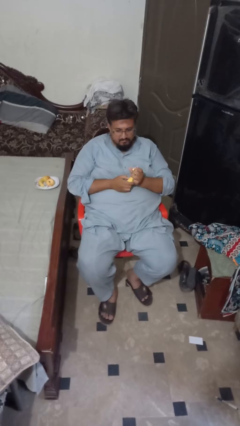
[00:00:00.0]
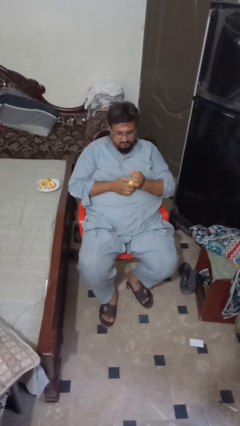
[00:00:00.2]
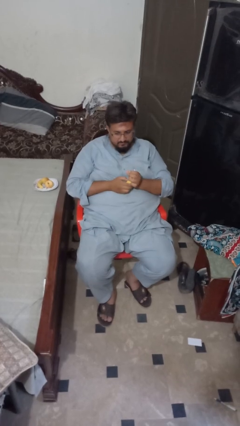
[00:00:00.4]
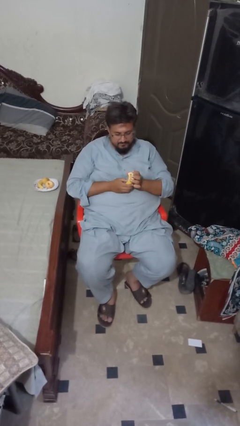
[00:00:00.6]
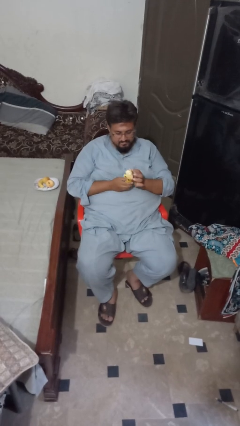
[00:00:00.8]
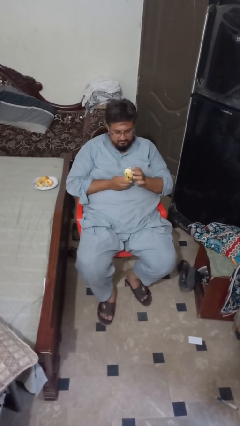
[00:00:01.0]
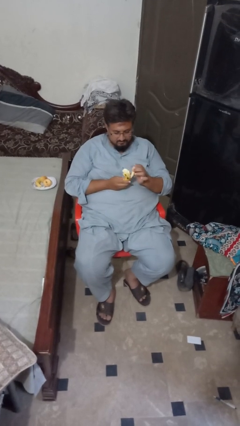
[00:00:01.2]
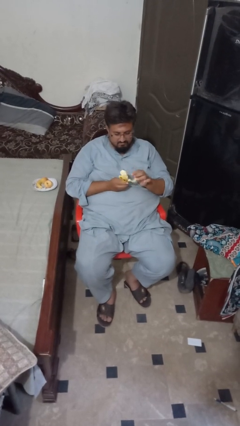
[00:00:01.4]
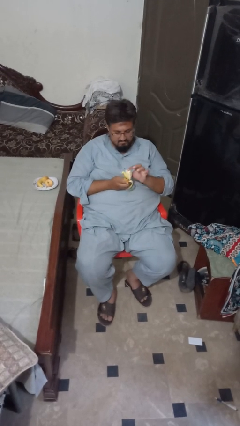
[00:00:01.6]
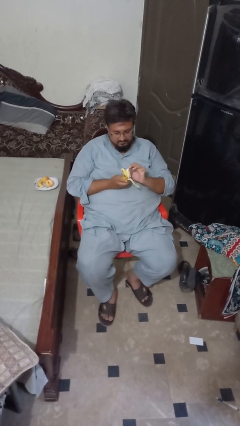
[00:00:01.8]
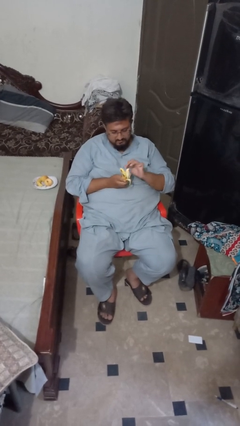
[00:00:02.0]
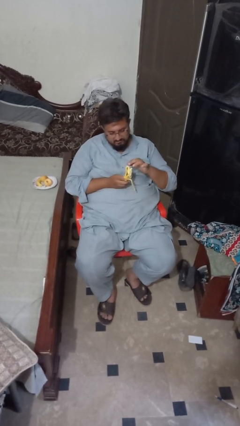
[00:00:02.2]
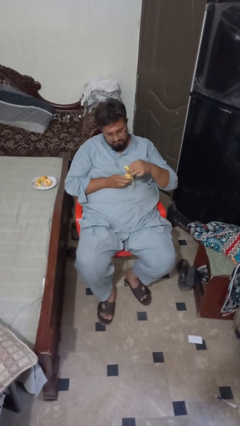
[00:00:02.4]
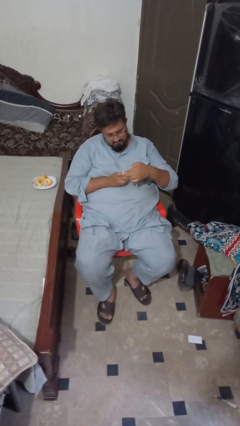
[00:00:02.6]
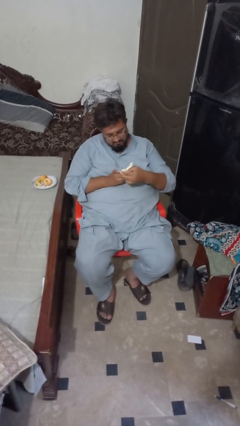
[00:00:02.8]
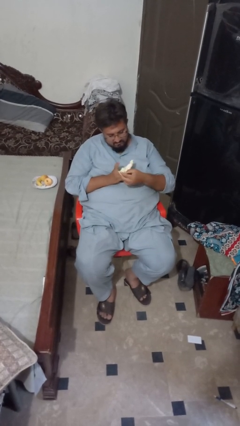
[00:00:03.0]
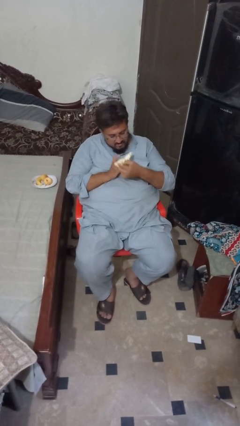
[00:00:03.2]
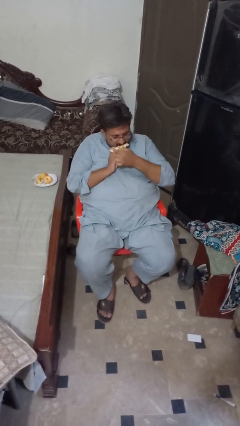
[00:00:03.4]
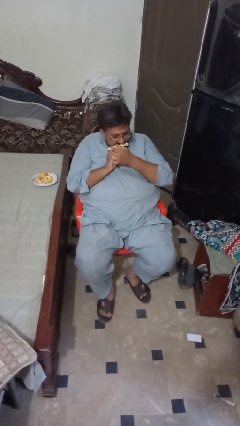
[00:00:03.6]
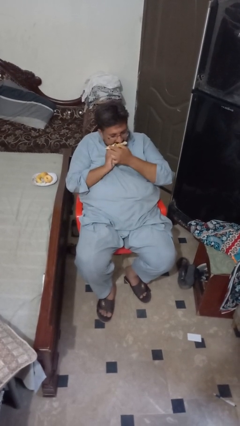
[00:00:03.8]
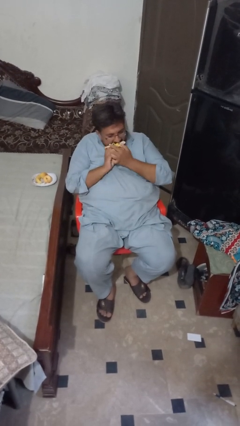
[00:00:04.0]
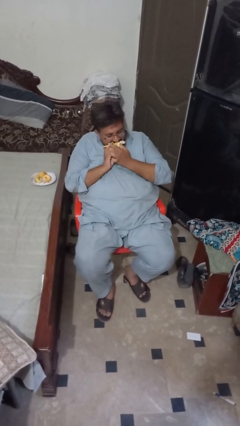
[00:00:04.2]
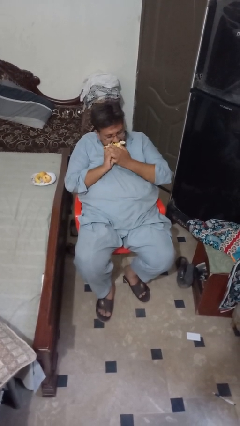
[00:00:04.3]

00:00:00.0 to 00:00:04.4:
person eats banana

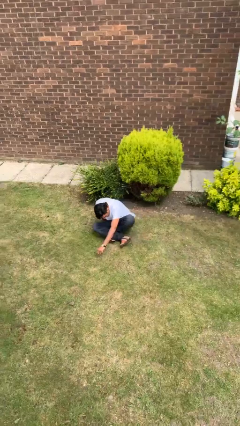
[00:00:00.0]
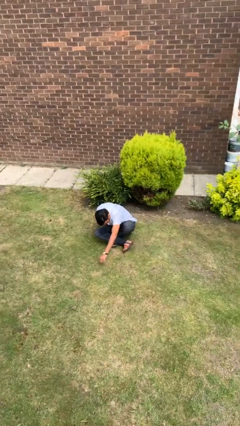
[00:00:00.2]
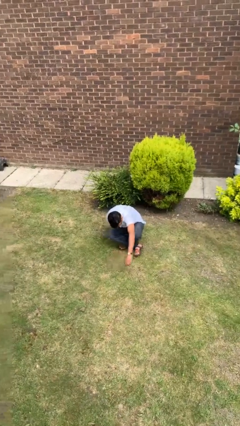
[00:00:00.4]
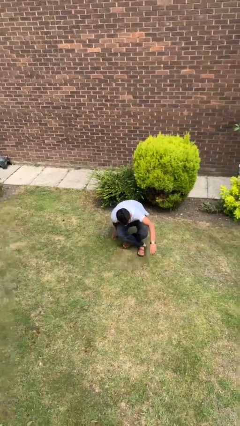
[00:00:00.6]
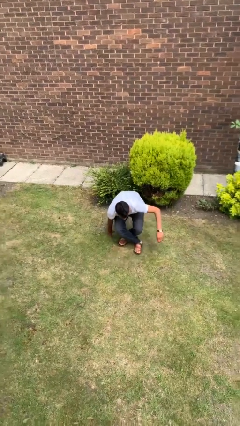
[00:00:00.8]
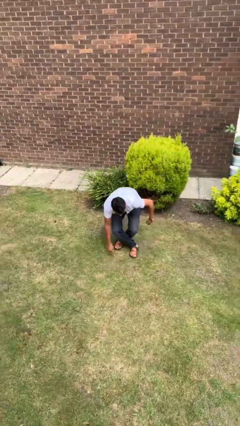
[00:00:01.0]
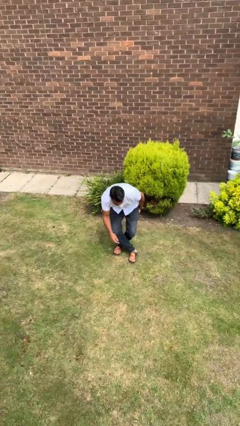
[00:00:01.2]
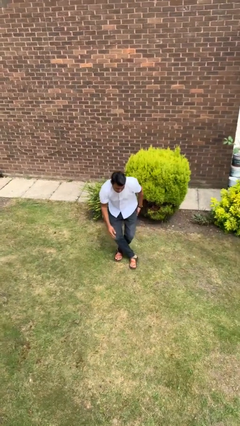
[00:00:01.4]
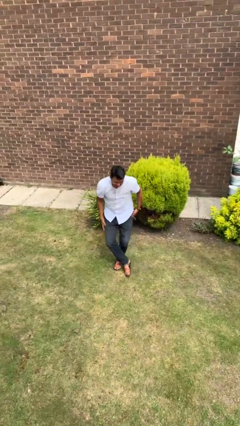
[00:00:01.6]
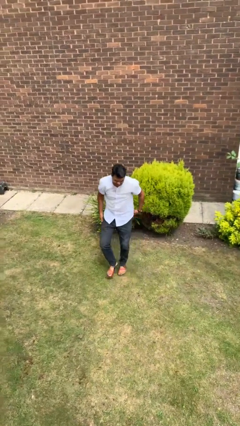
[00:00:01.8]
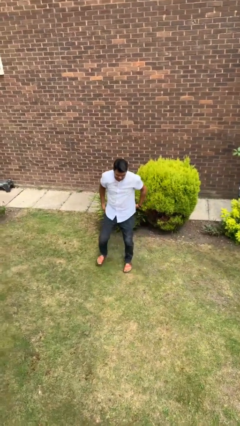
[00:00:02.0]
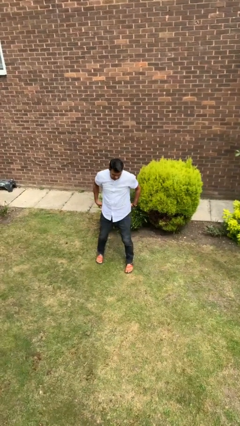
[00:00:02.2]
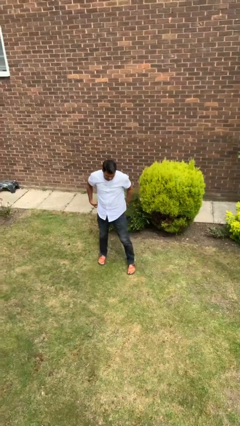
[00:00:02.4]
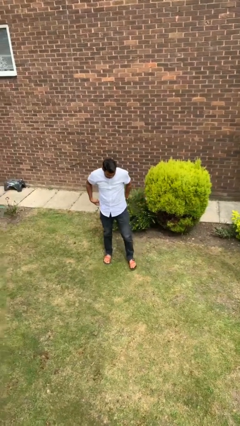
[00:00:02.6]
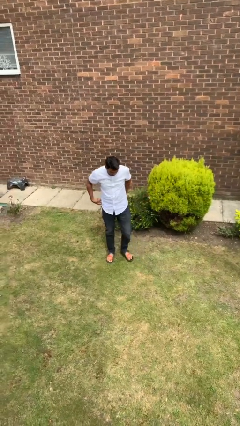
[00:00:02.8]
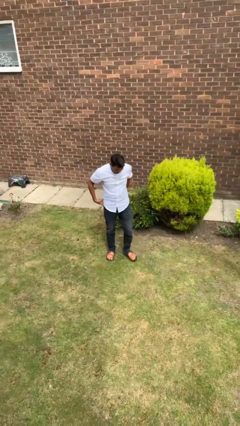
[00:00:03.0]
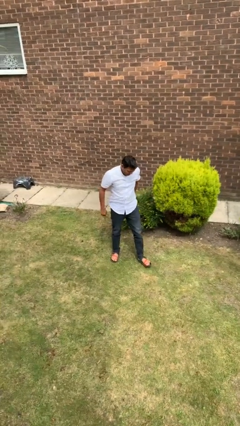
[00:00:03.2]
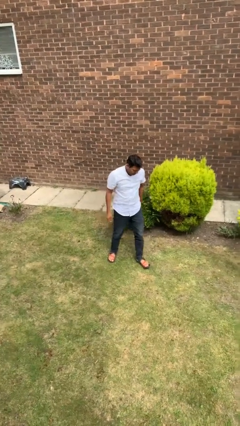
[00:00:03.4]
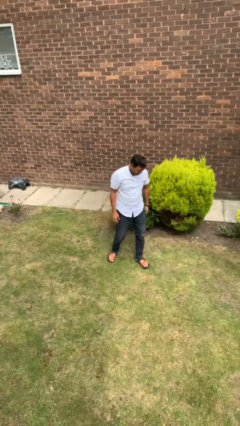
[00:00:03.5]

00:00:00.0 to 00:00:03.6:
person stands up from floor

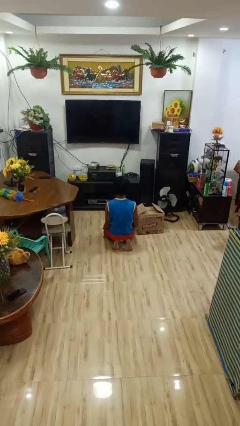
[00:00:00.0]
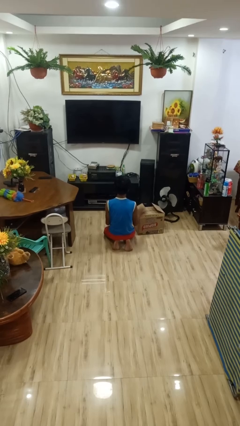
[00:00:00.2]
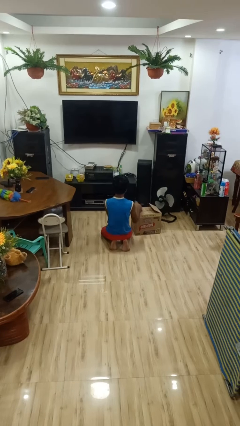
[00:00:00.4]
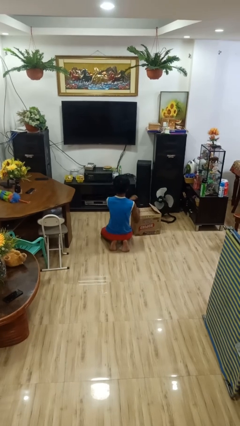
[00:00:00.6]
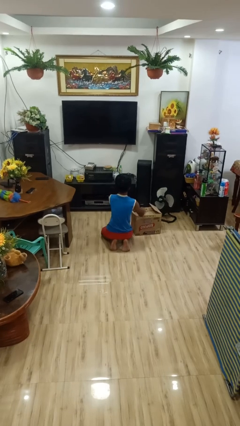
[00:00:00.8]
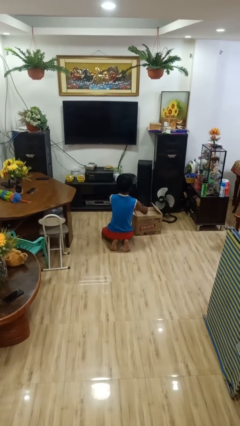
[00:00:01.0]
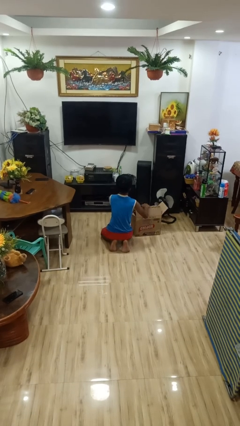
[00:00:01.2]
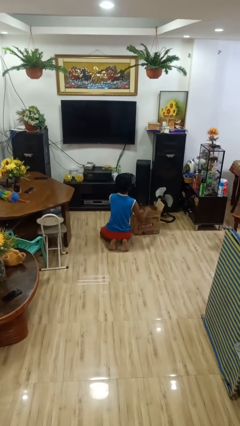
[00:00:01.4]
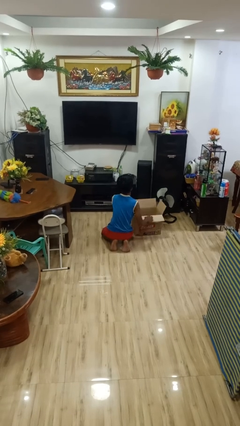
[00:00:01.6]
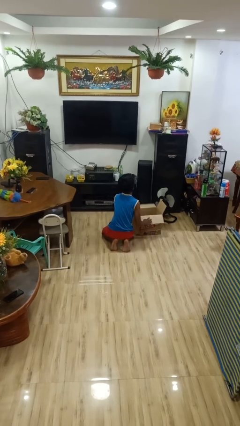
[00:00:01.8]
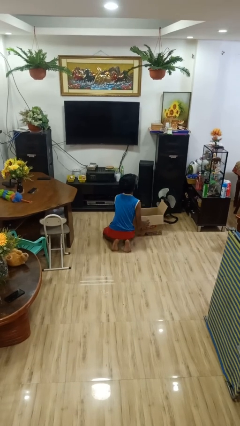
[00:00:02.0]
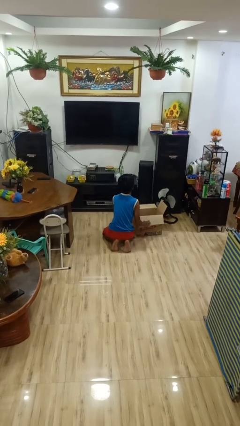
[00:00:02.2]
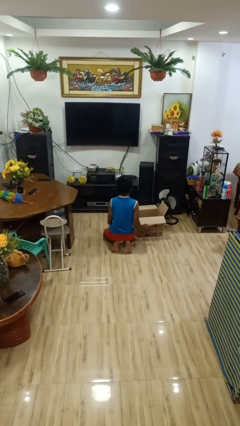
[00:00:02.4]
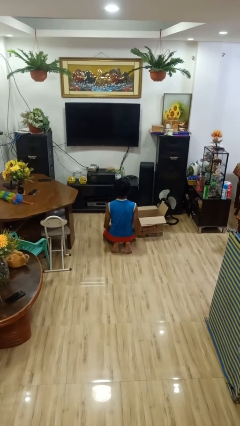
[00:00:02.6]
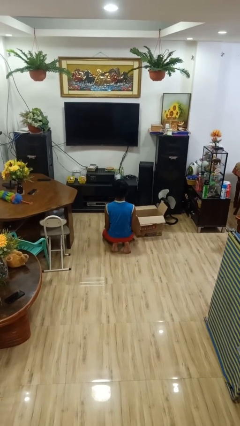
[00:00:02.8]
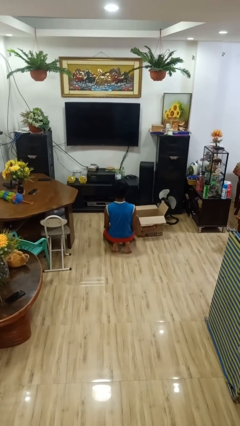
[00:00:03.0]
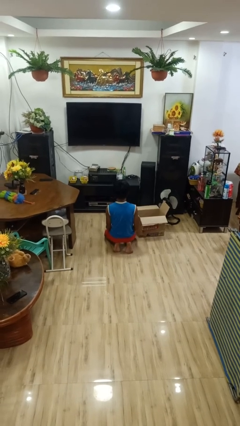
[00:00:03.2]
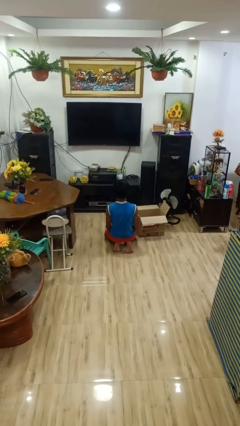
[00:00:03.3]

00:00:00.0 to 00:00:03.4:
person opens box

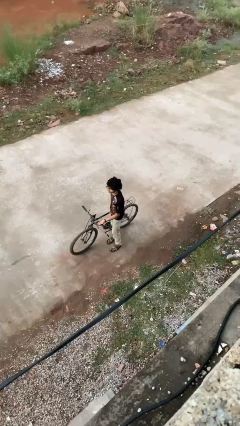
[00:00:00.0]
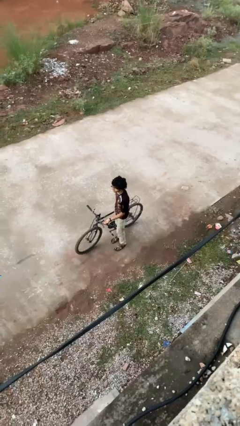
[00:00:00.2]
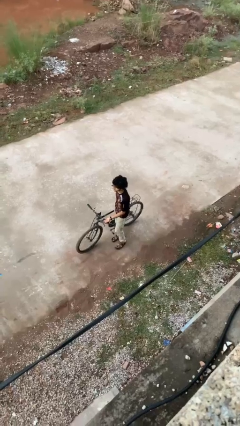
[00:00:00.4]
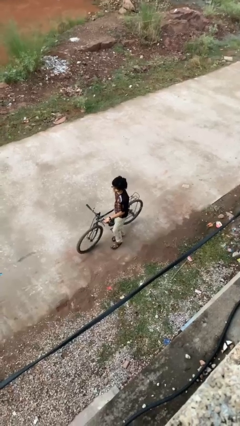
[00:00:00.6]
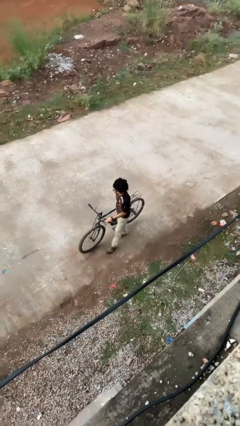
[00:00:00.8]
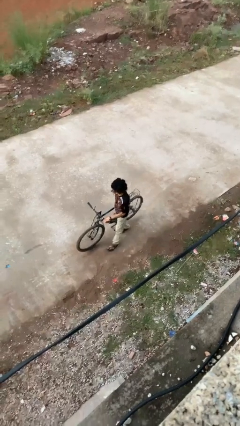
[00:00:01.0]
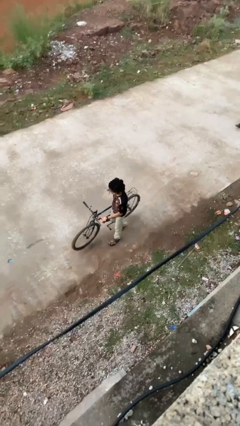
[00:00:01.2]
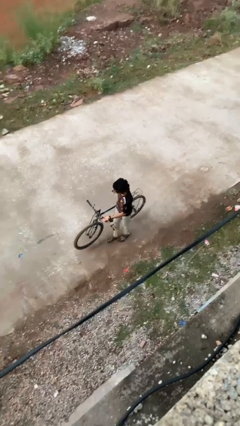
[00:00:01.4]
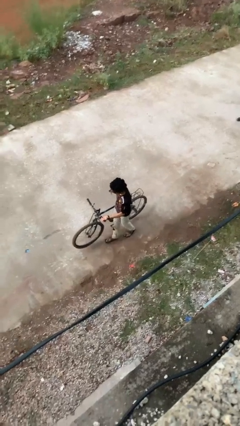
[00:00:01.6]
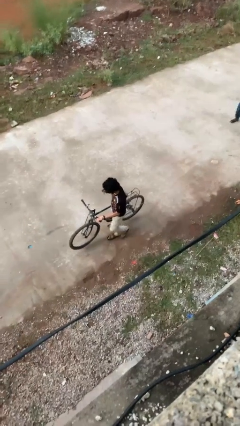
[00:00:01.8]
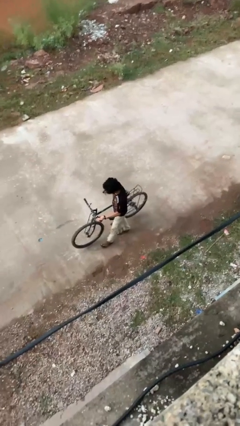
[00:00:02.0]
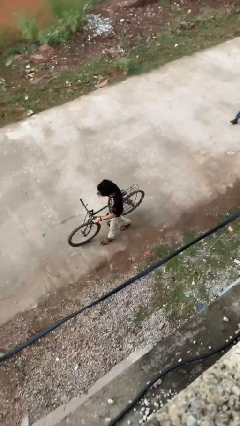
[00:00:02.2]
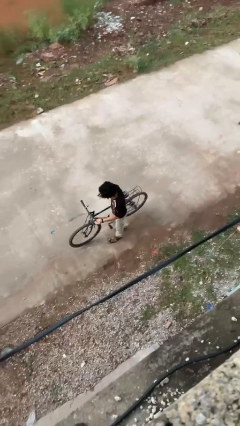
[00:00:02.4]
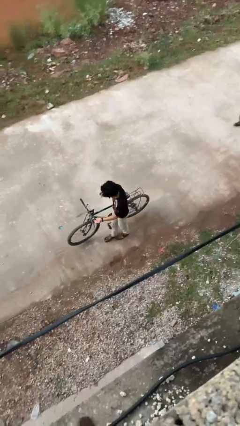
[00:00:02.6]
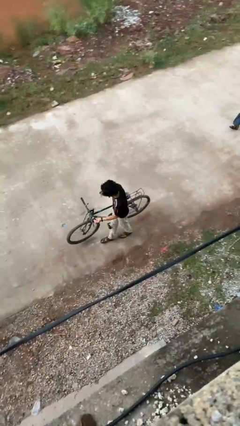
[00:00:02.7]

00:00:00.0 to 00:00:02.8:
person carries bicycle

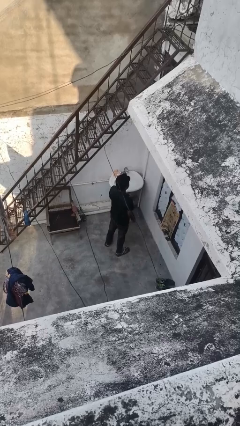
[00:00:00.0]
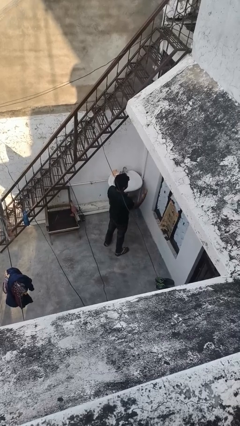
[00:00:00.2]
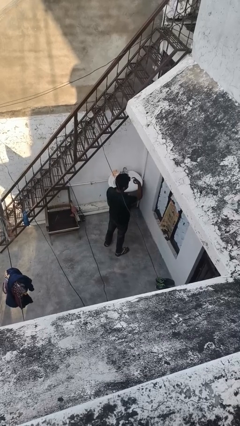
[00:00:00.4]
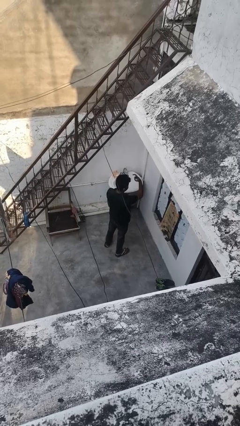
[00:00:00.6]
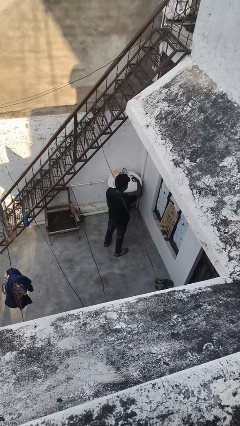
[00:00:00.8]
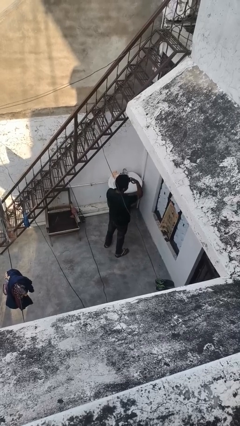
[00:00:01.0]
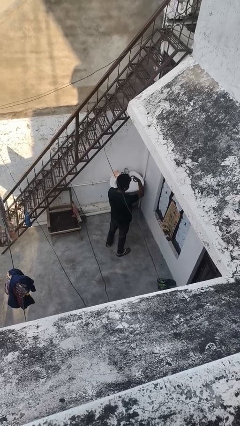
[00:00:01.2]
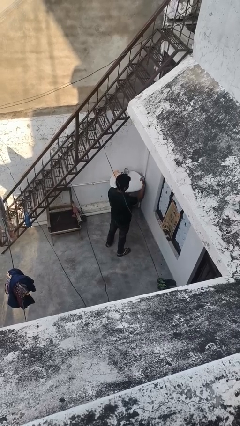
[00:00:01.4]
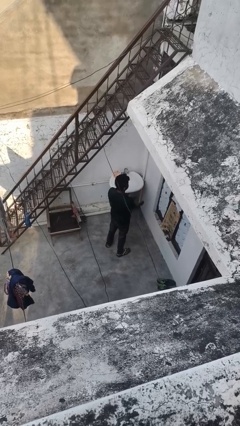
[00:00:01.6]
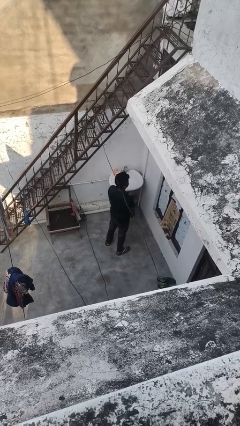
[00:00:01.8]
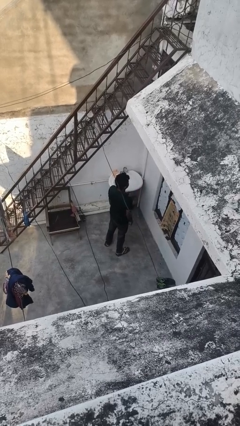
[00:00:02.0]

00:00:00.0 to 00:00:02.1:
person gestures watch closely

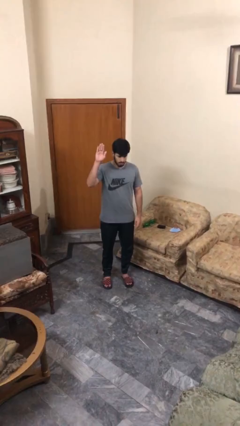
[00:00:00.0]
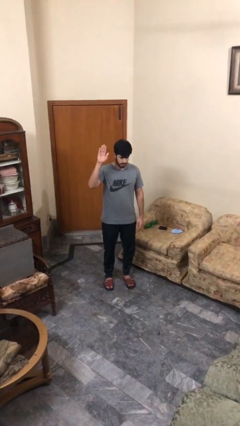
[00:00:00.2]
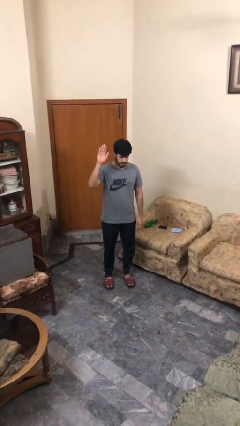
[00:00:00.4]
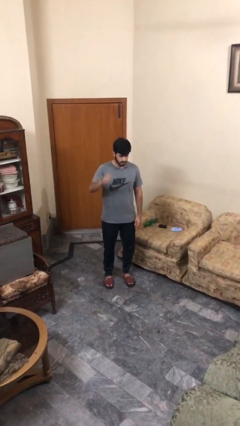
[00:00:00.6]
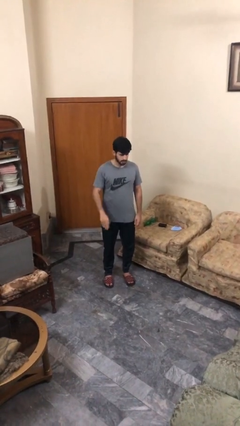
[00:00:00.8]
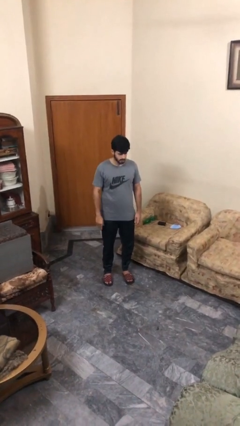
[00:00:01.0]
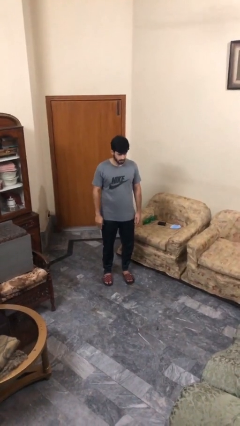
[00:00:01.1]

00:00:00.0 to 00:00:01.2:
person gestures lower hand
